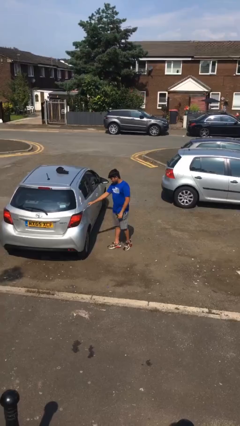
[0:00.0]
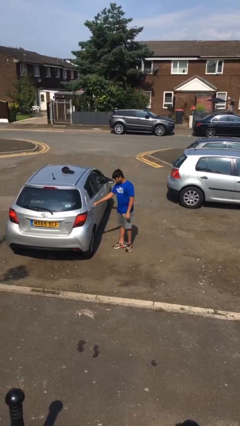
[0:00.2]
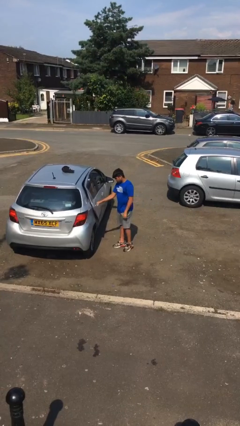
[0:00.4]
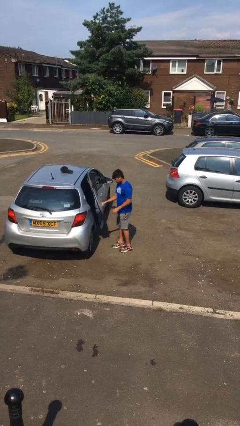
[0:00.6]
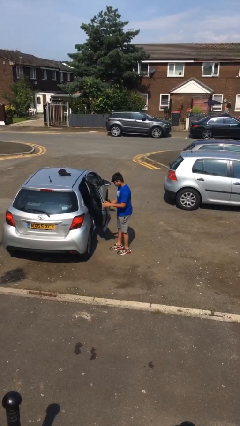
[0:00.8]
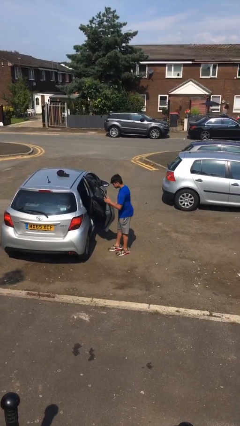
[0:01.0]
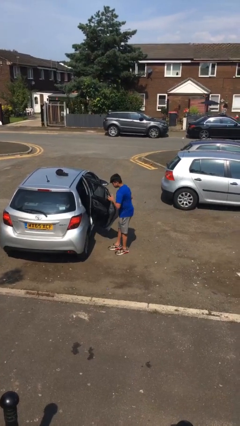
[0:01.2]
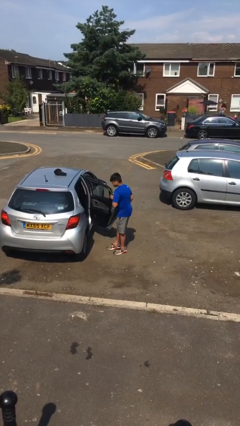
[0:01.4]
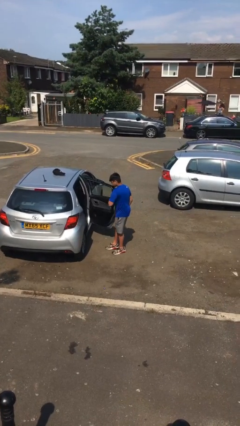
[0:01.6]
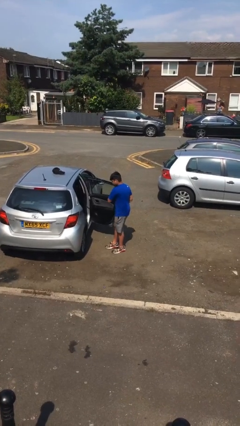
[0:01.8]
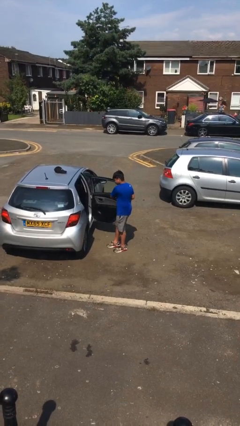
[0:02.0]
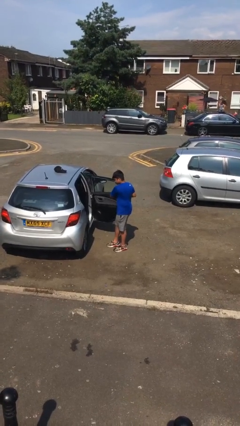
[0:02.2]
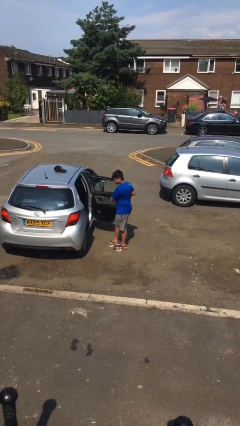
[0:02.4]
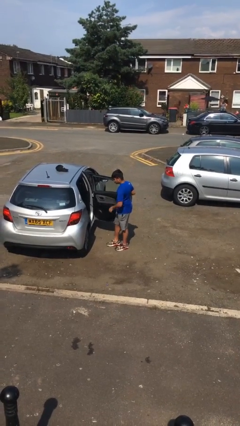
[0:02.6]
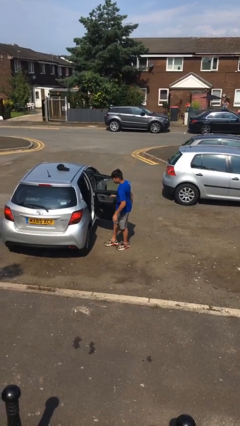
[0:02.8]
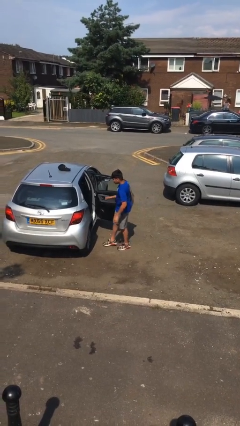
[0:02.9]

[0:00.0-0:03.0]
person opens car door

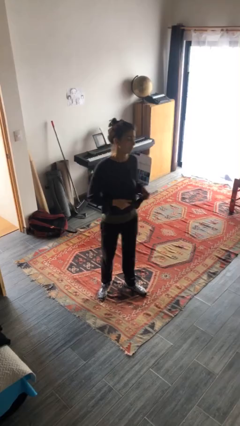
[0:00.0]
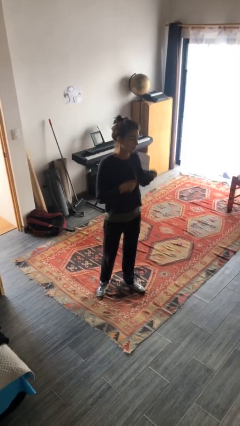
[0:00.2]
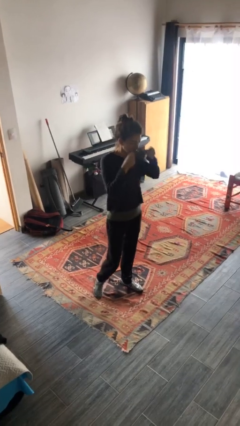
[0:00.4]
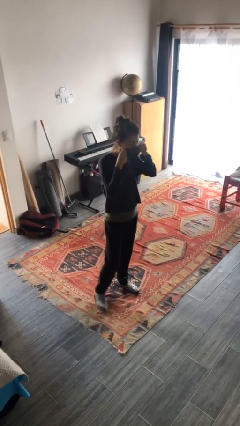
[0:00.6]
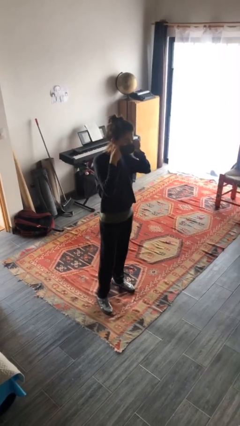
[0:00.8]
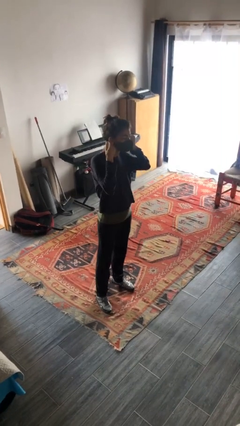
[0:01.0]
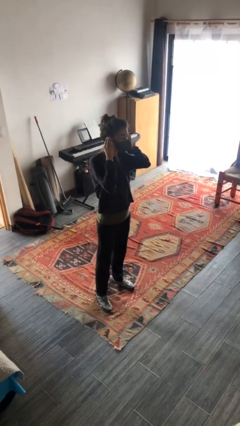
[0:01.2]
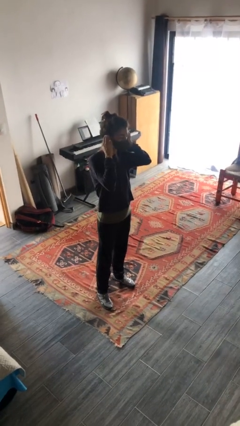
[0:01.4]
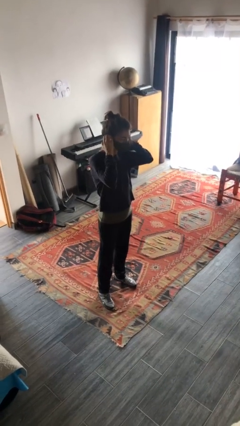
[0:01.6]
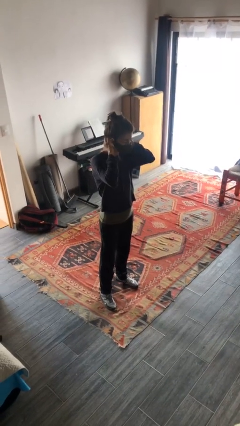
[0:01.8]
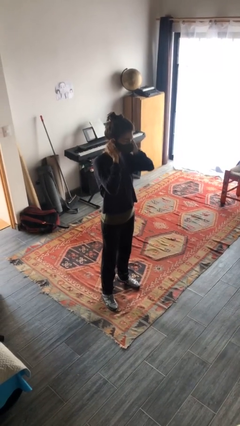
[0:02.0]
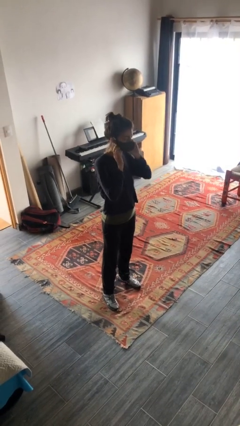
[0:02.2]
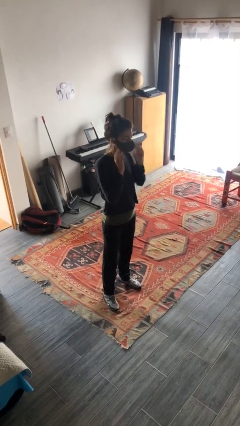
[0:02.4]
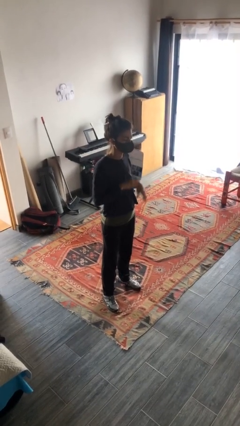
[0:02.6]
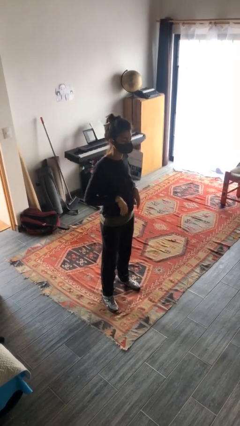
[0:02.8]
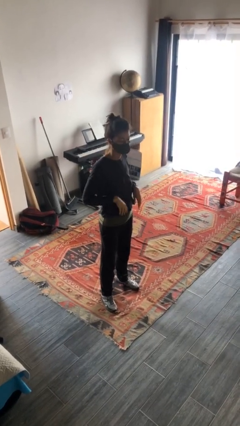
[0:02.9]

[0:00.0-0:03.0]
person puts on facemask

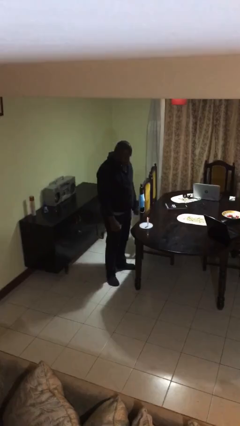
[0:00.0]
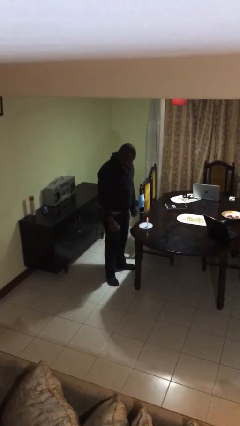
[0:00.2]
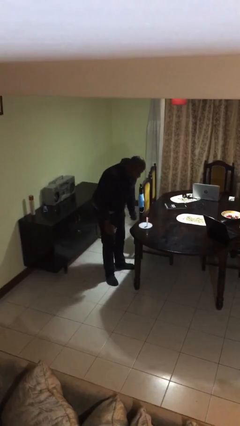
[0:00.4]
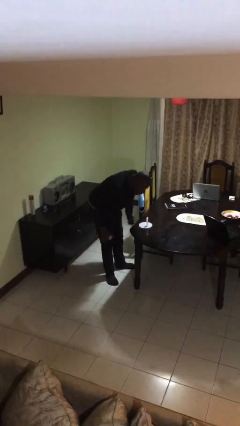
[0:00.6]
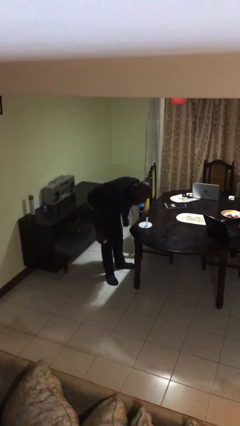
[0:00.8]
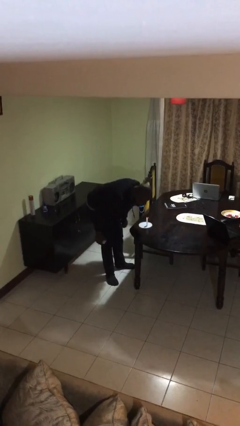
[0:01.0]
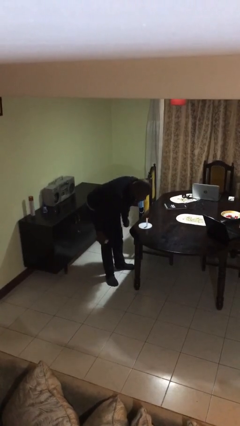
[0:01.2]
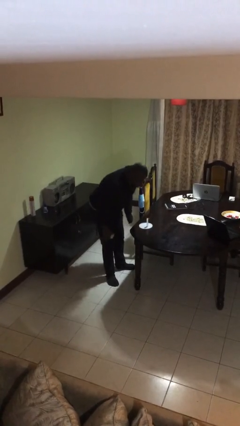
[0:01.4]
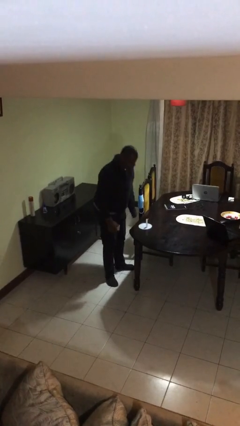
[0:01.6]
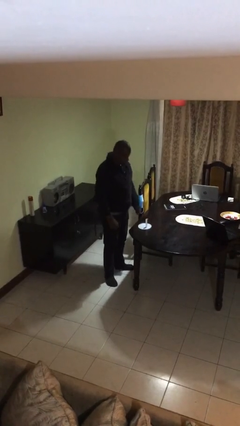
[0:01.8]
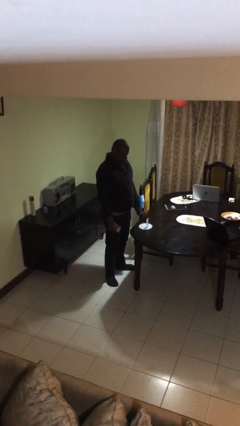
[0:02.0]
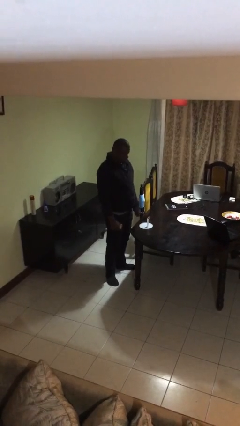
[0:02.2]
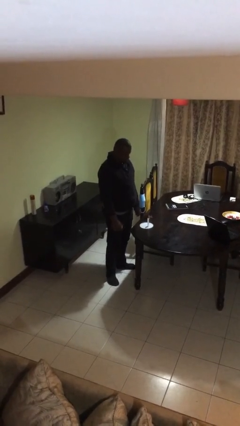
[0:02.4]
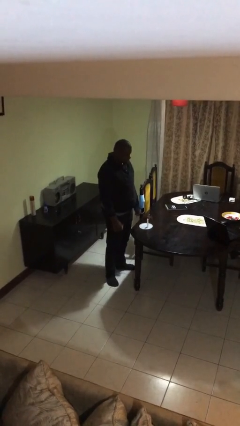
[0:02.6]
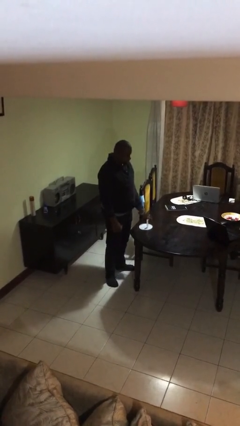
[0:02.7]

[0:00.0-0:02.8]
person extinguishes candle

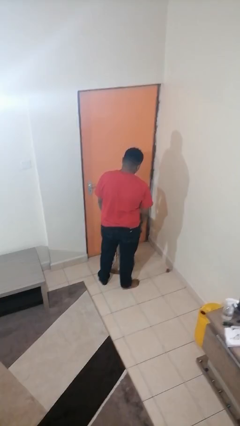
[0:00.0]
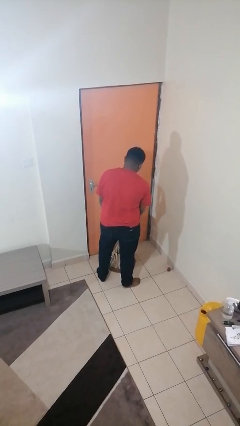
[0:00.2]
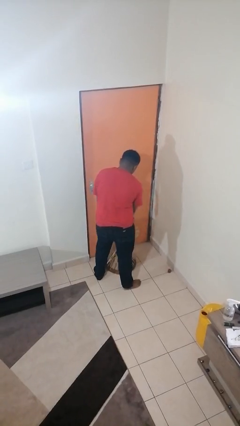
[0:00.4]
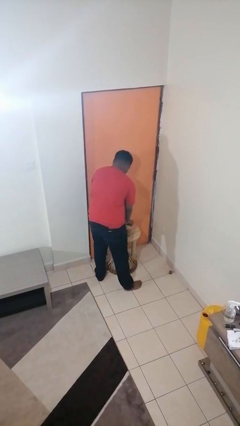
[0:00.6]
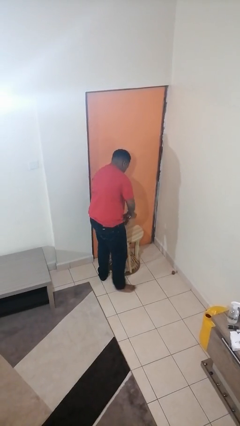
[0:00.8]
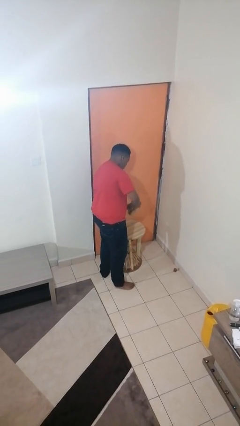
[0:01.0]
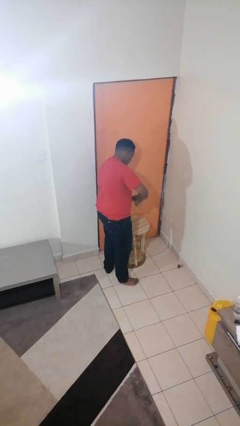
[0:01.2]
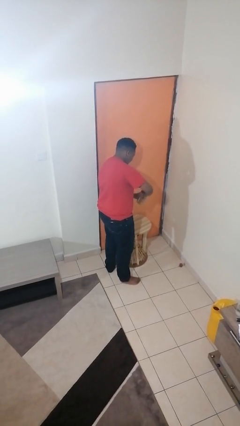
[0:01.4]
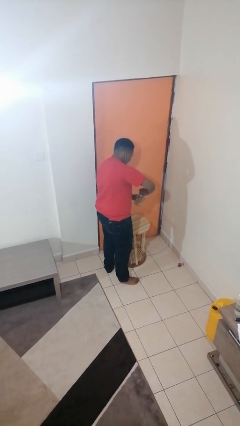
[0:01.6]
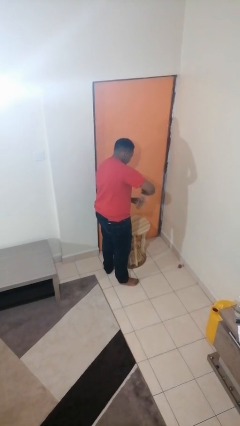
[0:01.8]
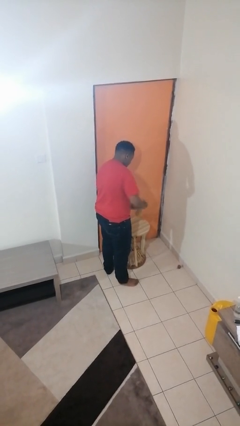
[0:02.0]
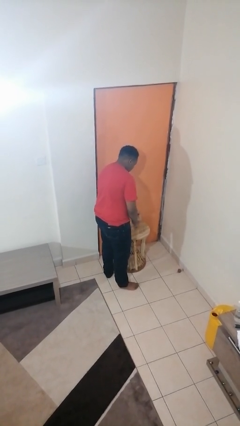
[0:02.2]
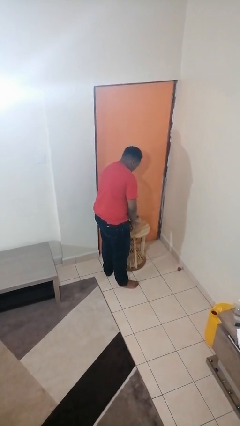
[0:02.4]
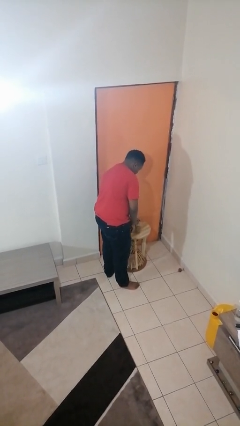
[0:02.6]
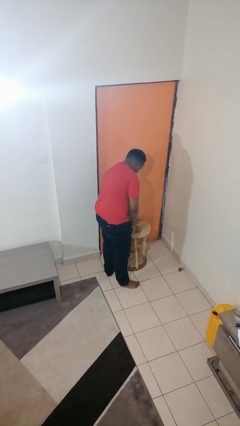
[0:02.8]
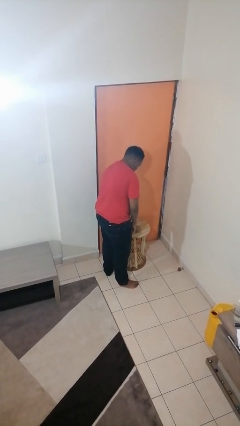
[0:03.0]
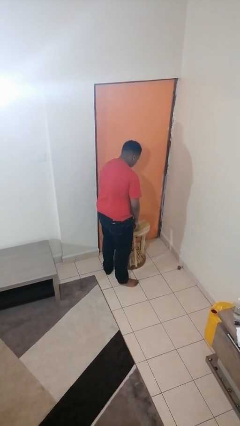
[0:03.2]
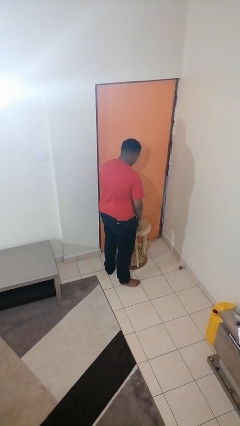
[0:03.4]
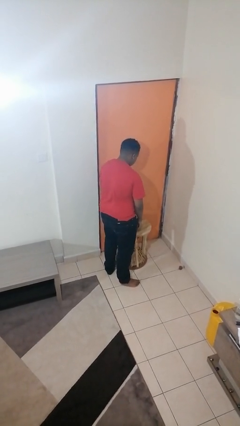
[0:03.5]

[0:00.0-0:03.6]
person opens jar

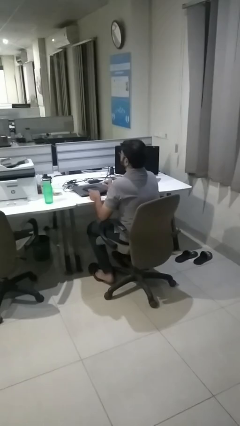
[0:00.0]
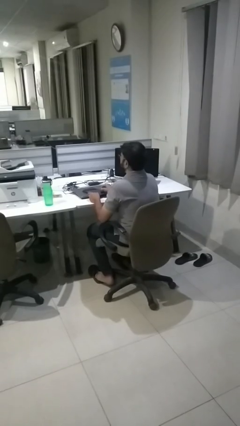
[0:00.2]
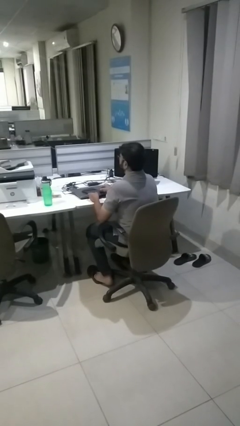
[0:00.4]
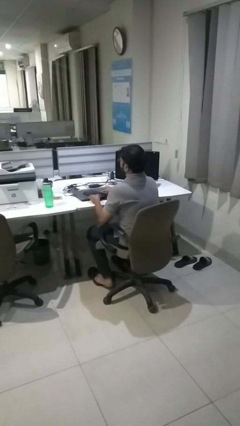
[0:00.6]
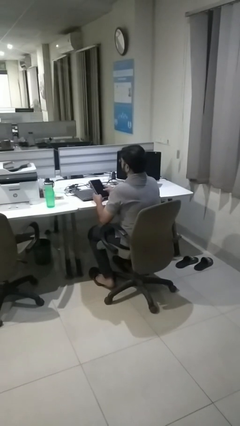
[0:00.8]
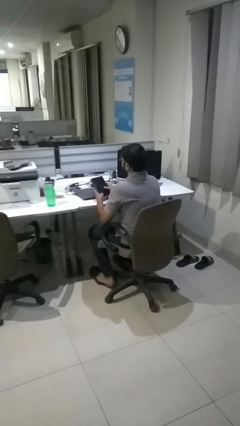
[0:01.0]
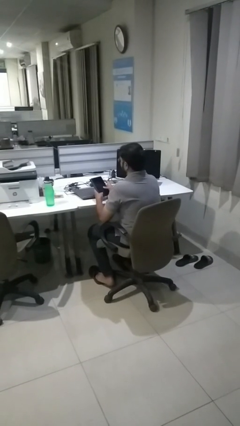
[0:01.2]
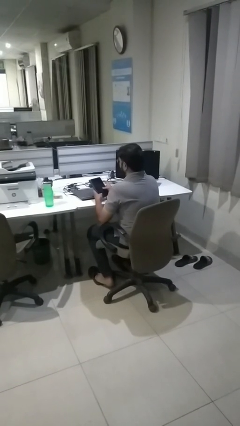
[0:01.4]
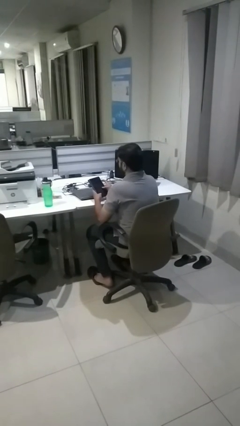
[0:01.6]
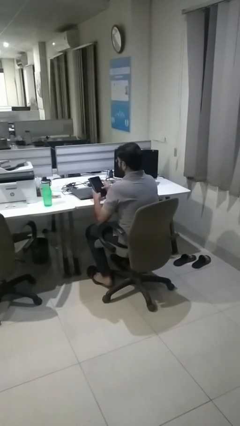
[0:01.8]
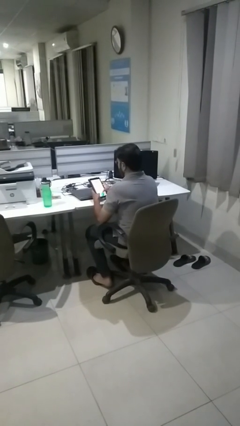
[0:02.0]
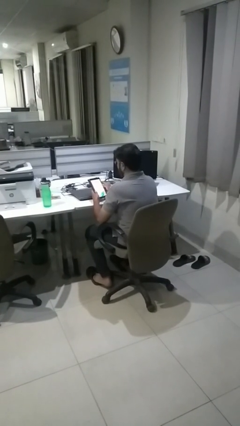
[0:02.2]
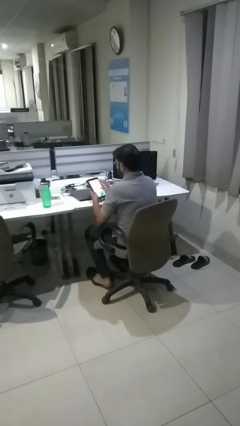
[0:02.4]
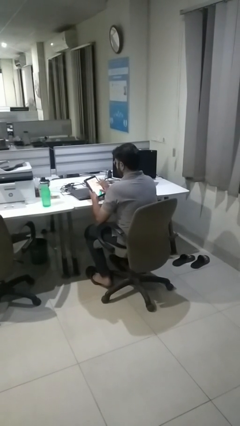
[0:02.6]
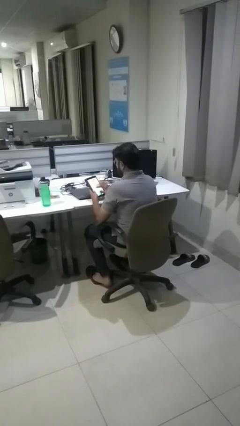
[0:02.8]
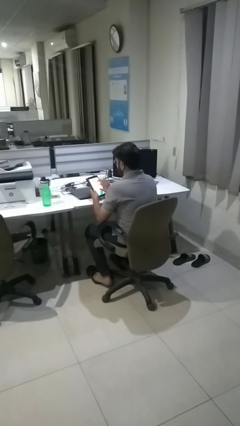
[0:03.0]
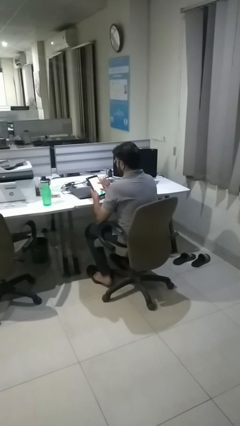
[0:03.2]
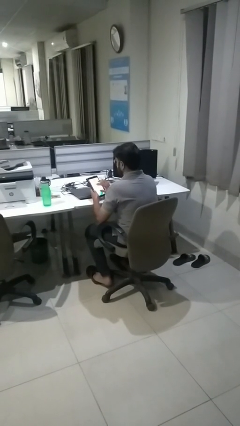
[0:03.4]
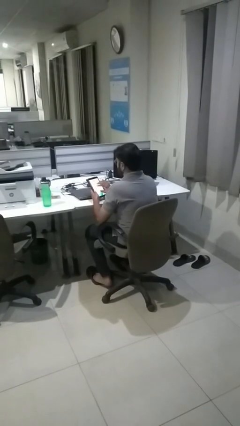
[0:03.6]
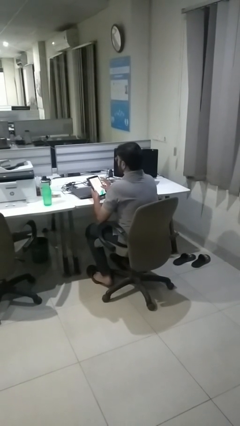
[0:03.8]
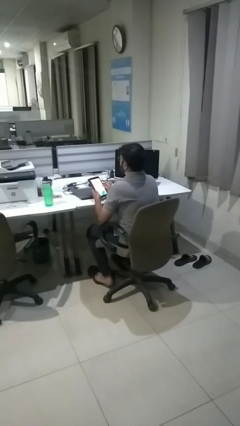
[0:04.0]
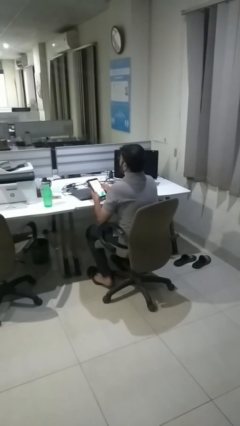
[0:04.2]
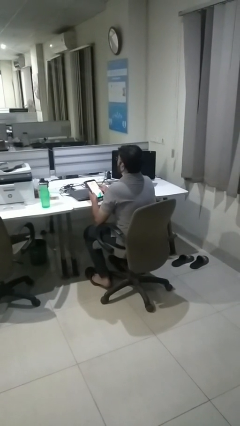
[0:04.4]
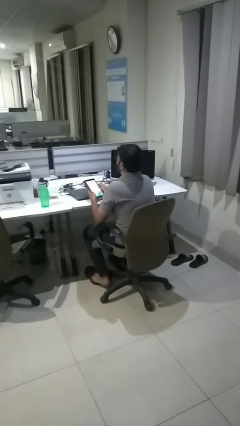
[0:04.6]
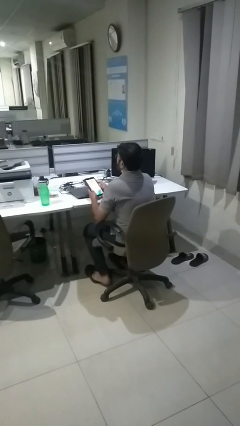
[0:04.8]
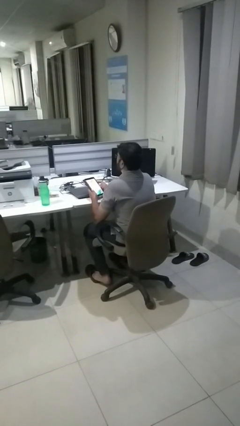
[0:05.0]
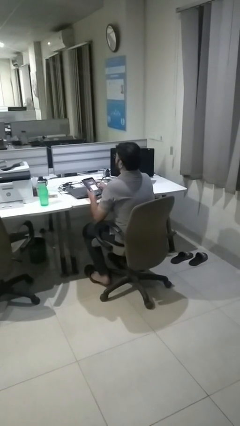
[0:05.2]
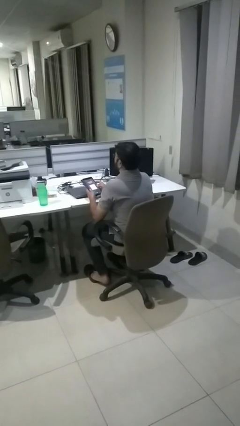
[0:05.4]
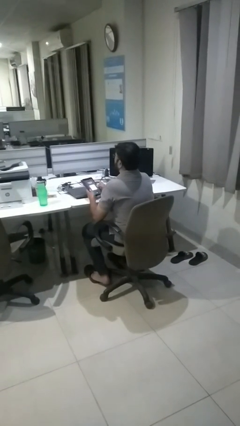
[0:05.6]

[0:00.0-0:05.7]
person interacts with tablet
